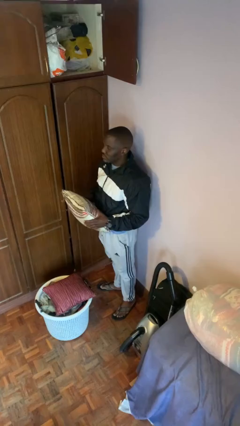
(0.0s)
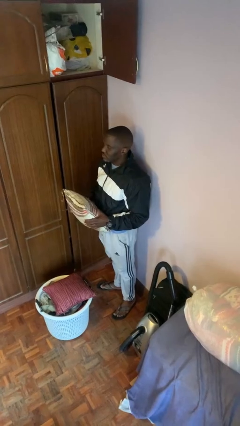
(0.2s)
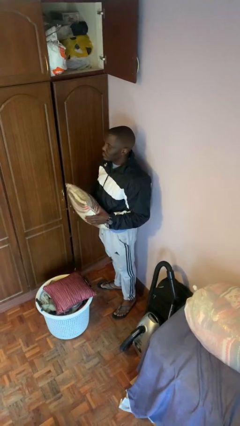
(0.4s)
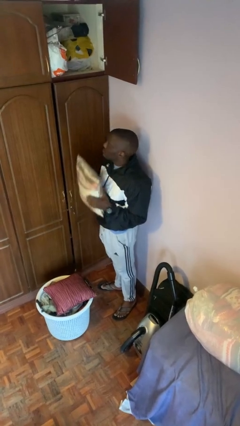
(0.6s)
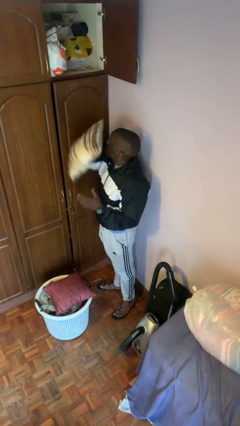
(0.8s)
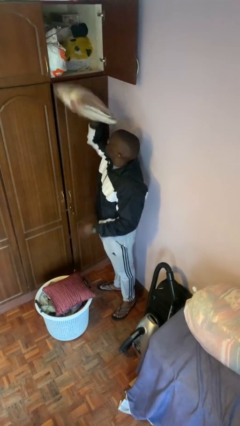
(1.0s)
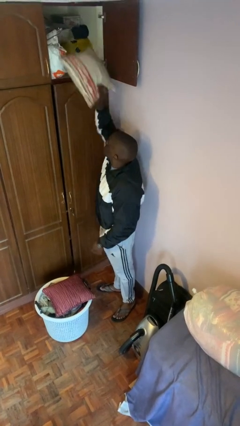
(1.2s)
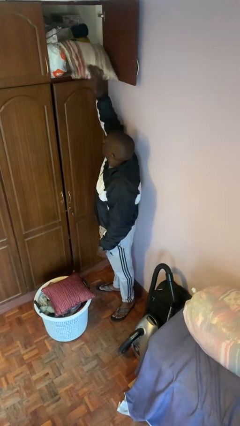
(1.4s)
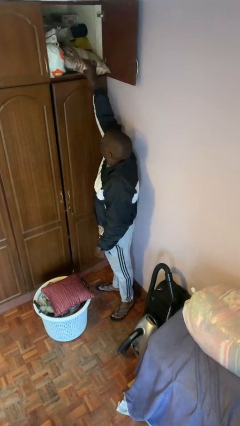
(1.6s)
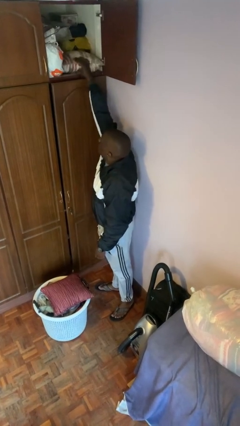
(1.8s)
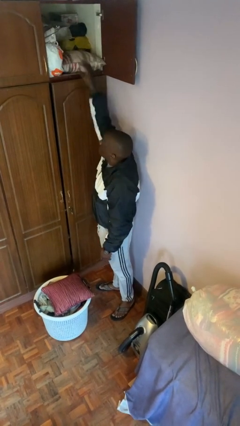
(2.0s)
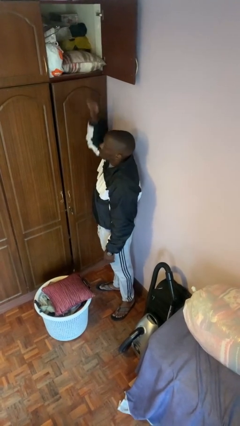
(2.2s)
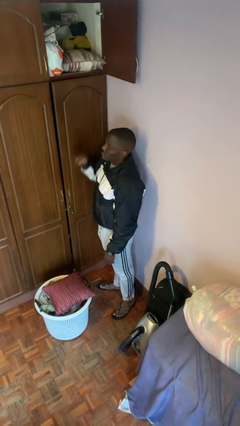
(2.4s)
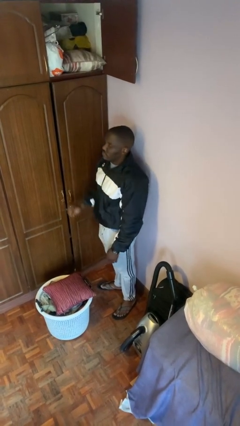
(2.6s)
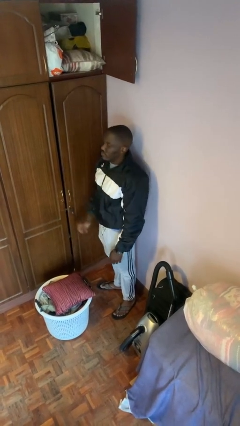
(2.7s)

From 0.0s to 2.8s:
person puts down object on shelf

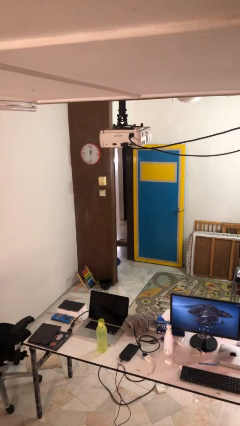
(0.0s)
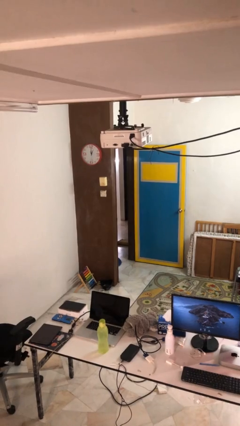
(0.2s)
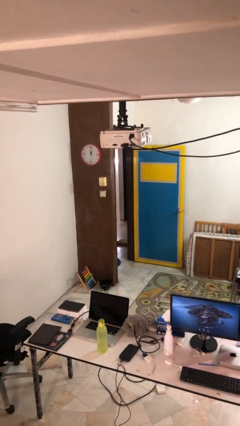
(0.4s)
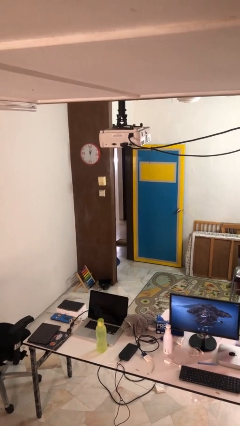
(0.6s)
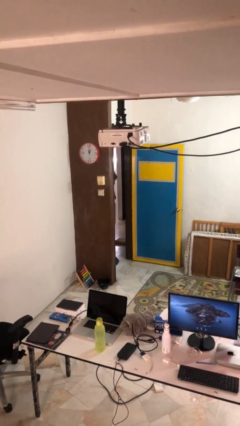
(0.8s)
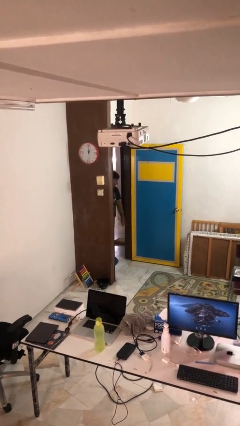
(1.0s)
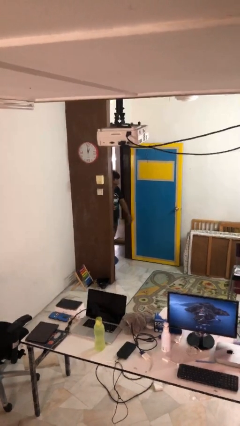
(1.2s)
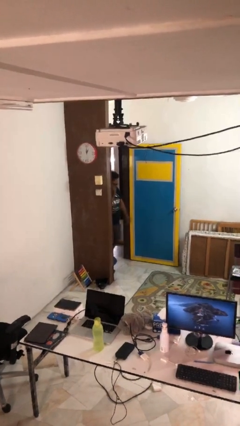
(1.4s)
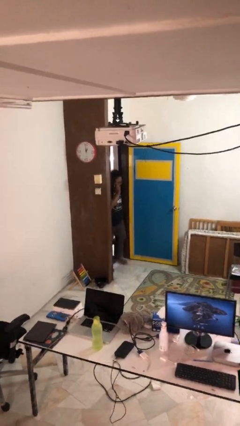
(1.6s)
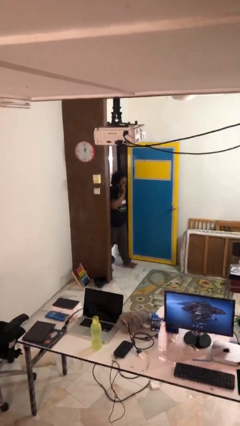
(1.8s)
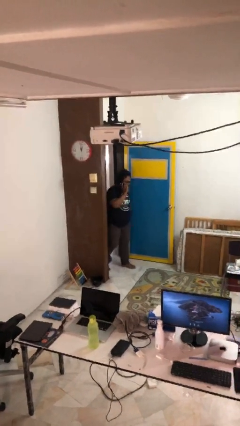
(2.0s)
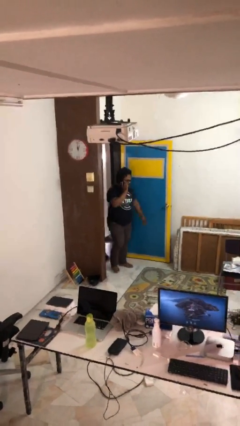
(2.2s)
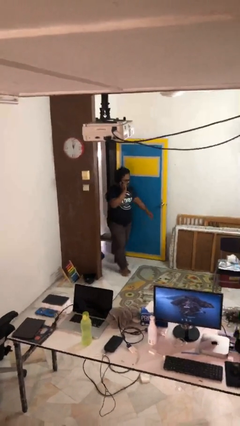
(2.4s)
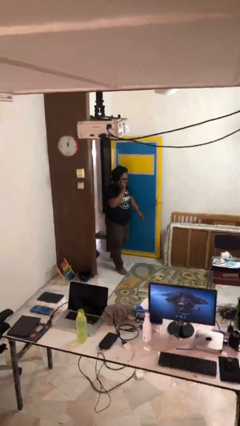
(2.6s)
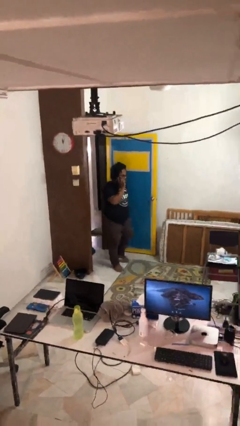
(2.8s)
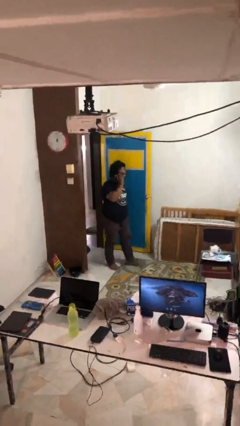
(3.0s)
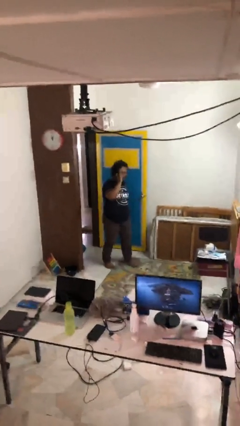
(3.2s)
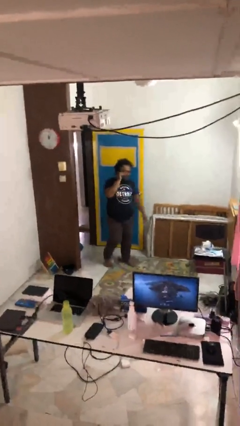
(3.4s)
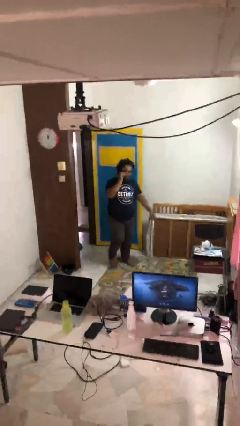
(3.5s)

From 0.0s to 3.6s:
person enters scene through structure

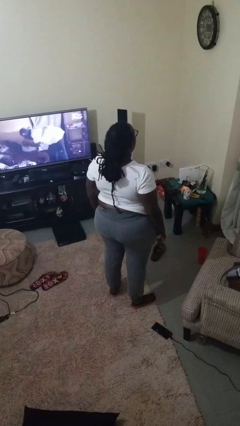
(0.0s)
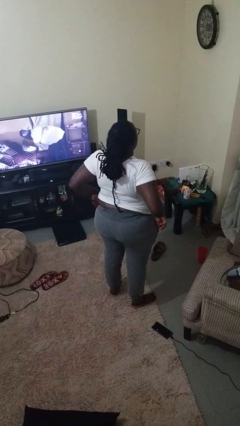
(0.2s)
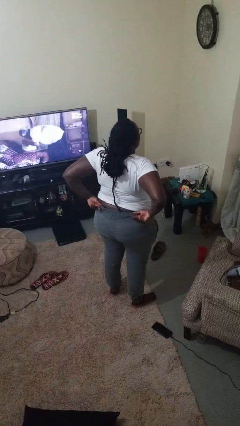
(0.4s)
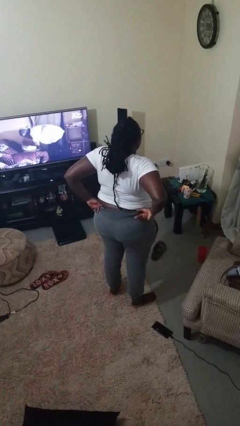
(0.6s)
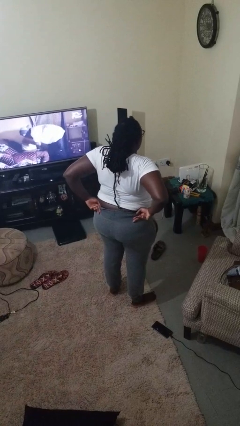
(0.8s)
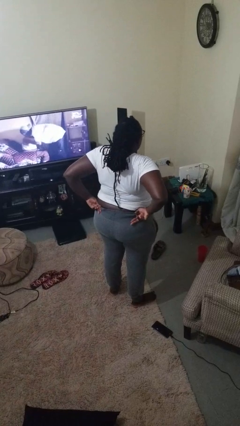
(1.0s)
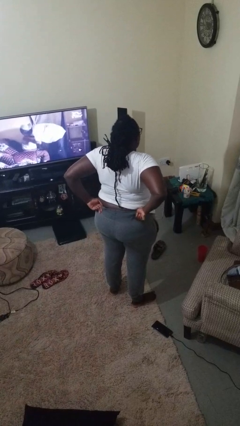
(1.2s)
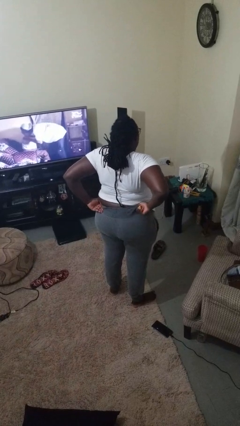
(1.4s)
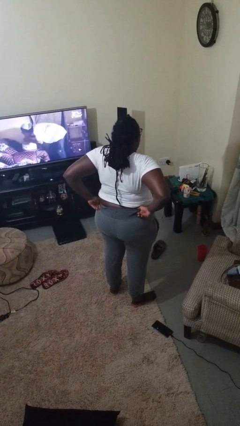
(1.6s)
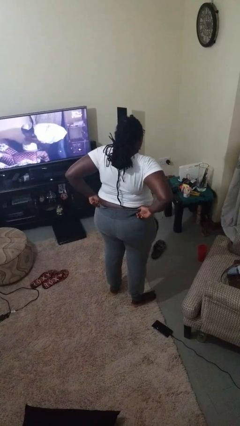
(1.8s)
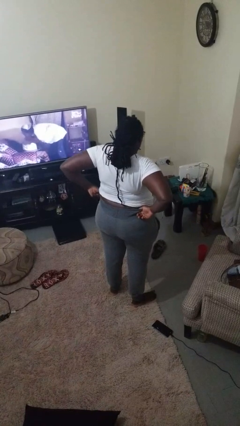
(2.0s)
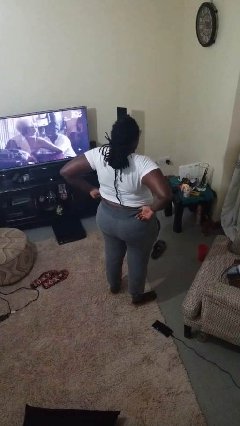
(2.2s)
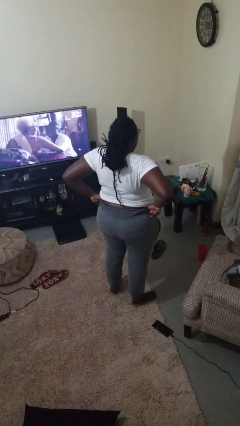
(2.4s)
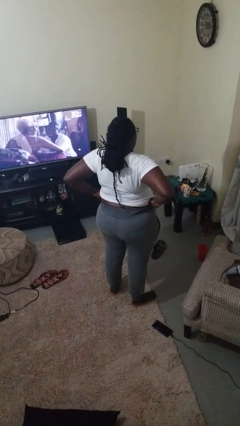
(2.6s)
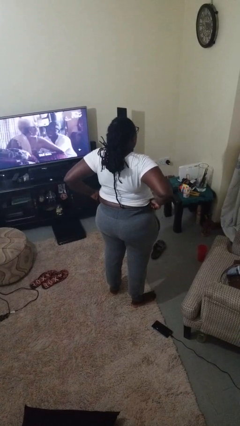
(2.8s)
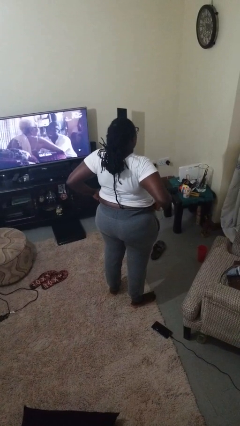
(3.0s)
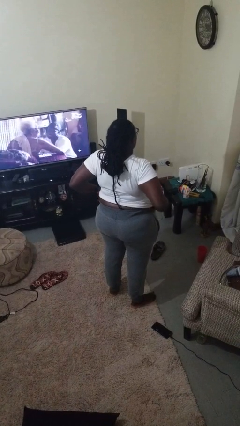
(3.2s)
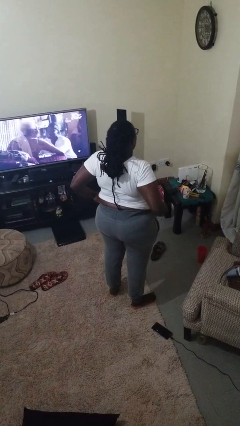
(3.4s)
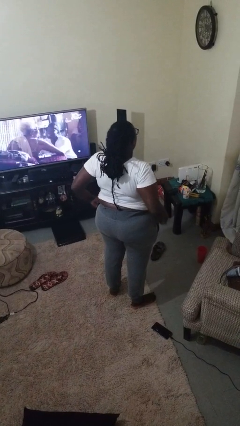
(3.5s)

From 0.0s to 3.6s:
person hikes up pants

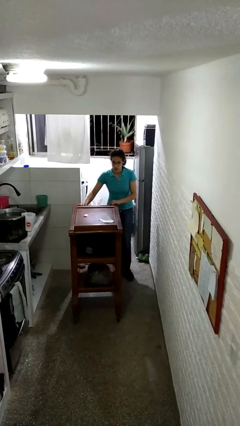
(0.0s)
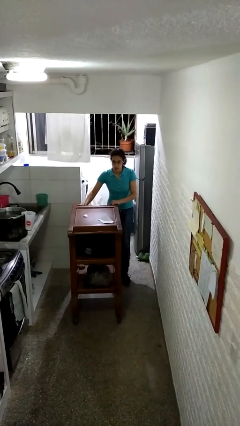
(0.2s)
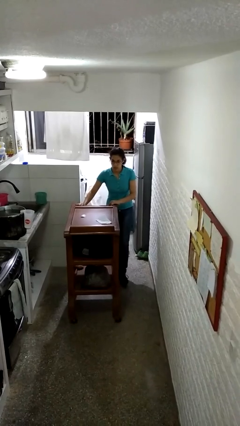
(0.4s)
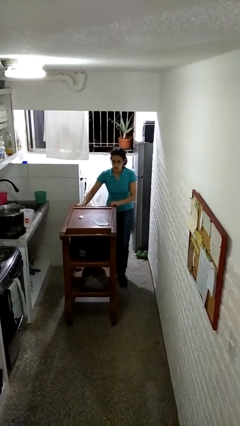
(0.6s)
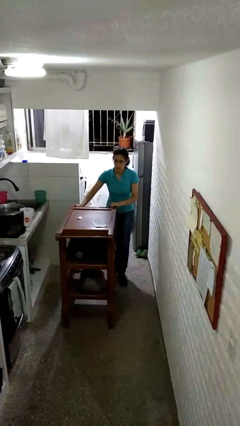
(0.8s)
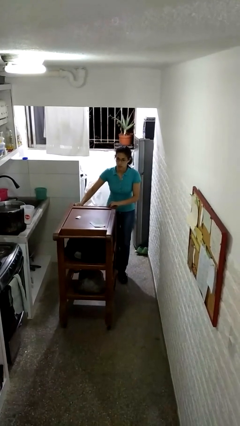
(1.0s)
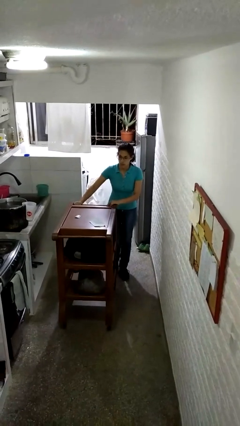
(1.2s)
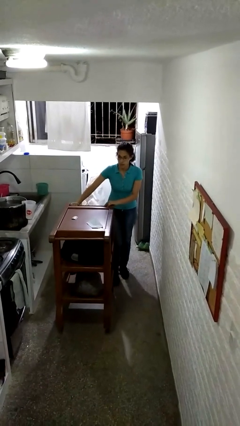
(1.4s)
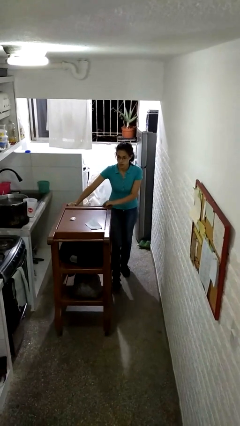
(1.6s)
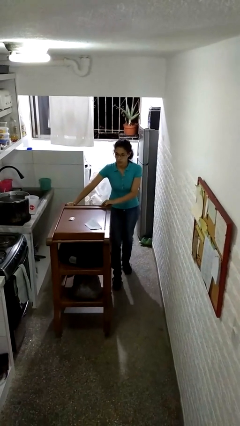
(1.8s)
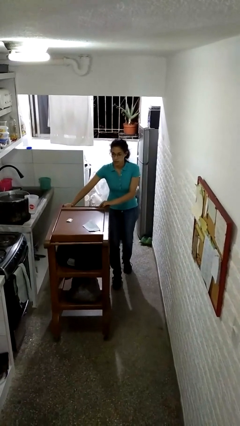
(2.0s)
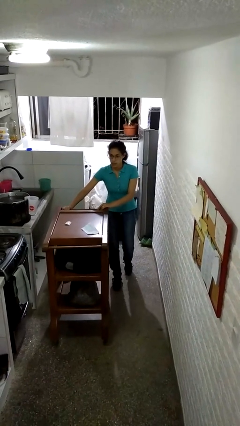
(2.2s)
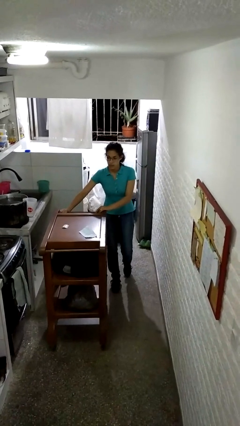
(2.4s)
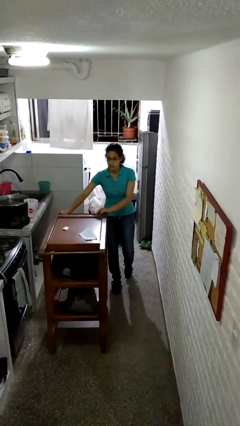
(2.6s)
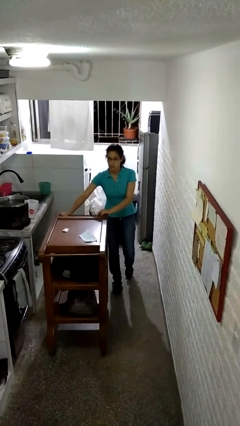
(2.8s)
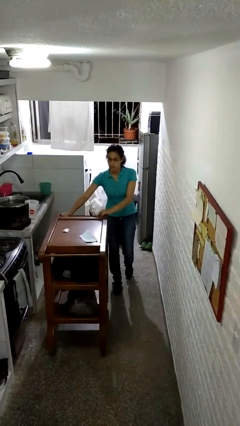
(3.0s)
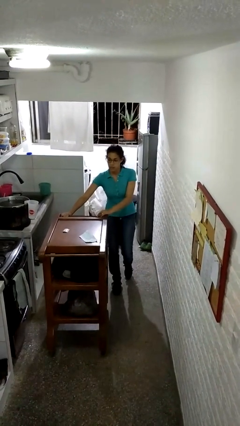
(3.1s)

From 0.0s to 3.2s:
person pushes wheeled cart

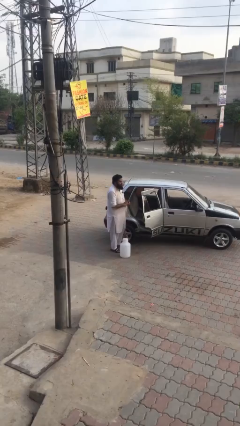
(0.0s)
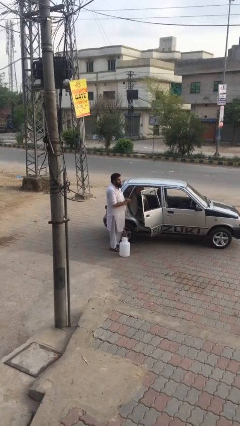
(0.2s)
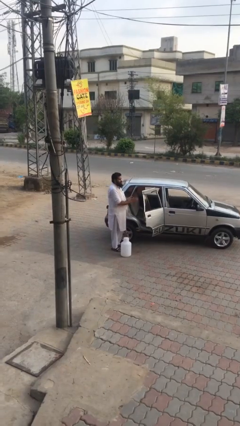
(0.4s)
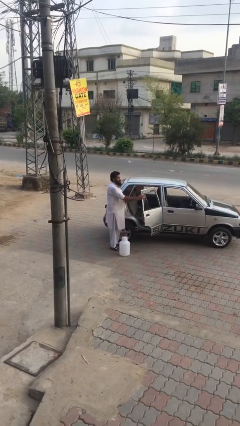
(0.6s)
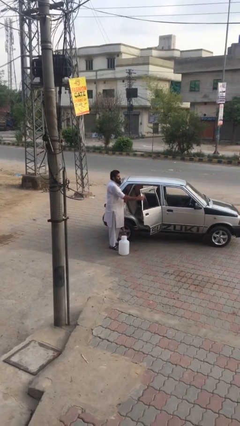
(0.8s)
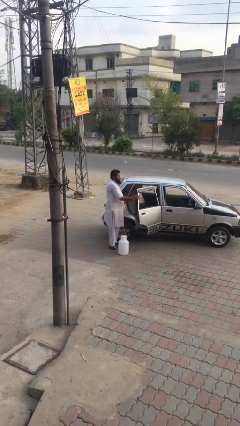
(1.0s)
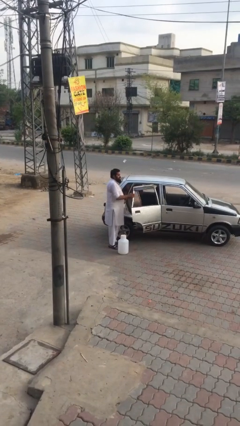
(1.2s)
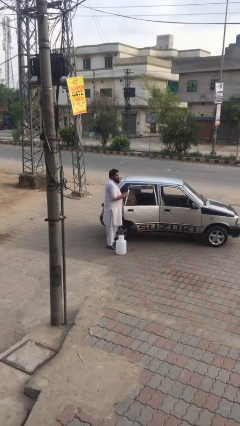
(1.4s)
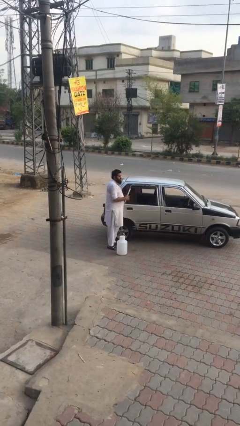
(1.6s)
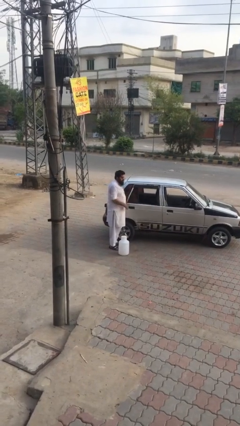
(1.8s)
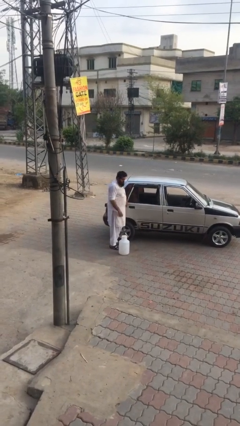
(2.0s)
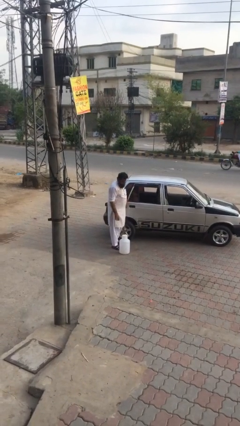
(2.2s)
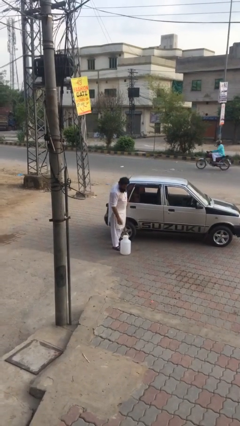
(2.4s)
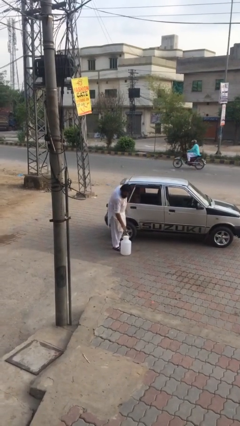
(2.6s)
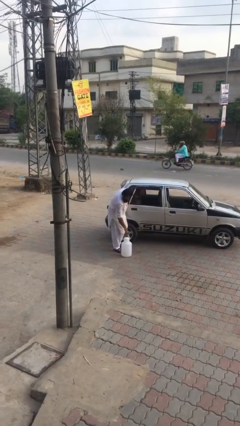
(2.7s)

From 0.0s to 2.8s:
person closes car door

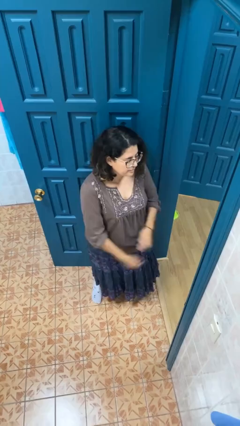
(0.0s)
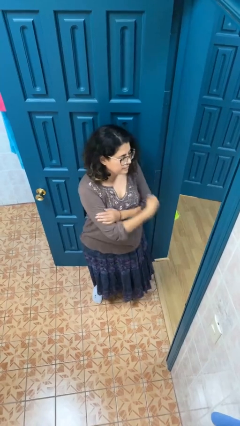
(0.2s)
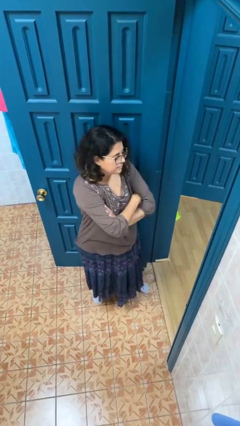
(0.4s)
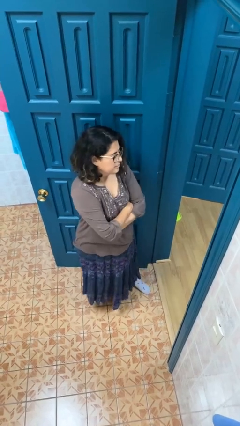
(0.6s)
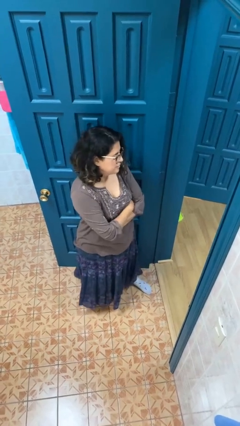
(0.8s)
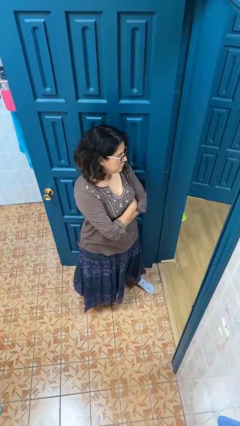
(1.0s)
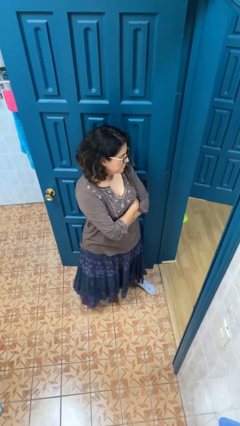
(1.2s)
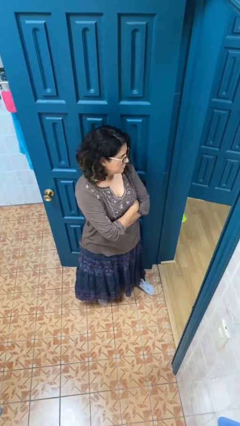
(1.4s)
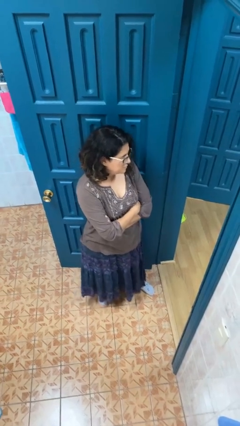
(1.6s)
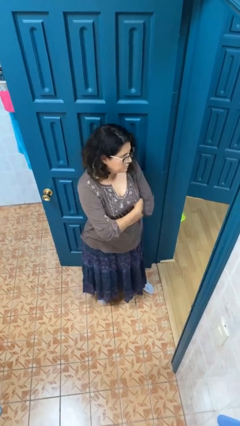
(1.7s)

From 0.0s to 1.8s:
person crosses arms
